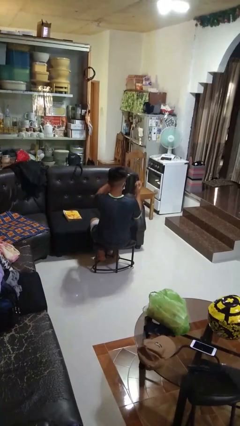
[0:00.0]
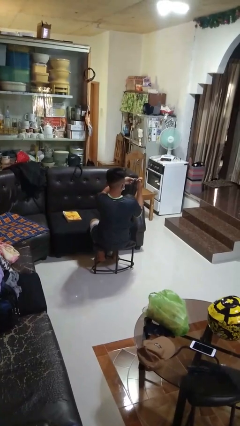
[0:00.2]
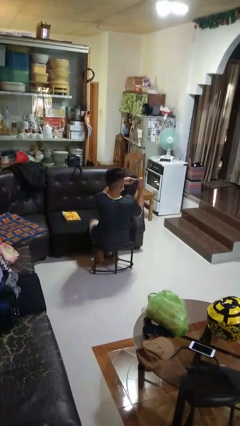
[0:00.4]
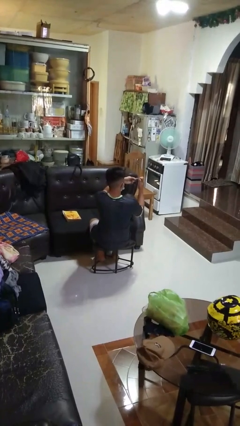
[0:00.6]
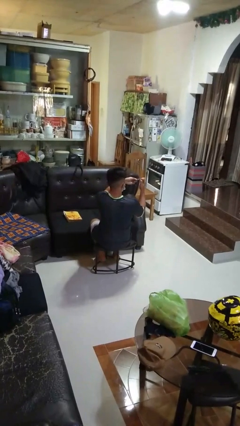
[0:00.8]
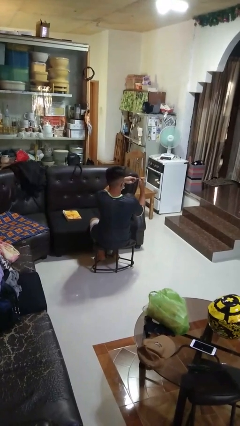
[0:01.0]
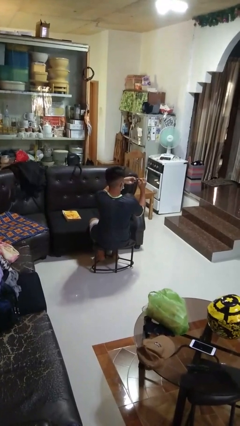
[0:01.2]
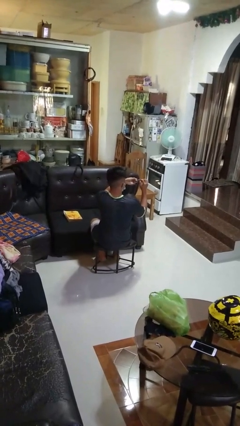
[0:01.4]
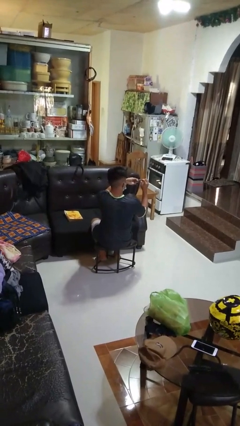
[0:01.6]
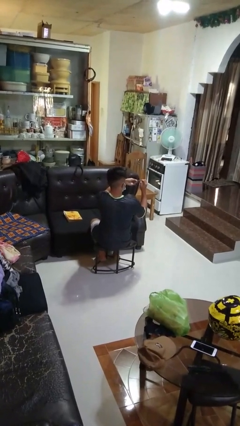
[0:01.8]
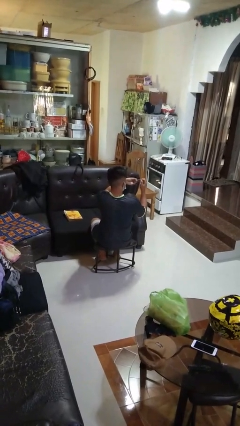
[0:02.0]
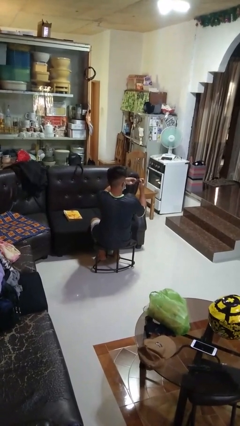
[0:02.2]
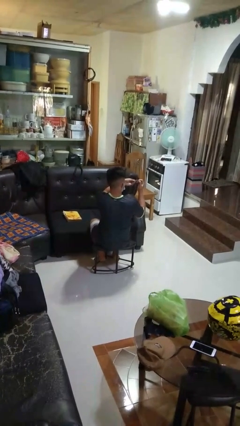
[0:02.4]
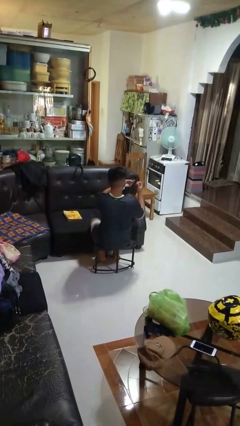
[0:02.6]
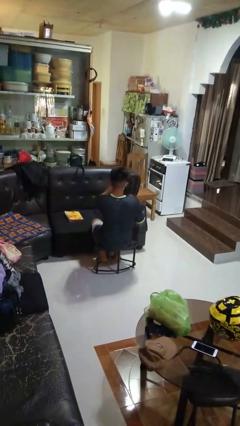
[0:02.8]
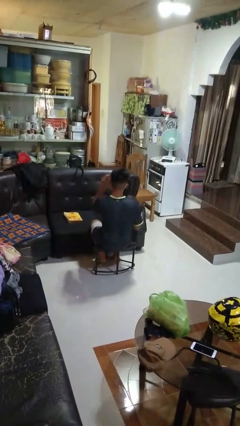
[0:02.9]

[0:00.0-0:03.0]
person clips fingernails

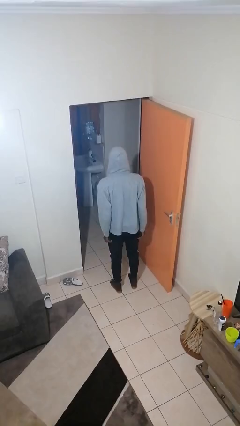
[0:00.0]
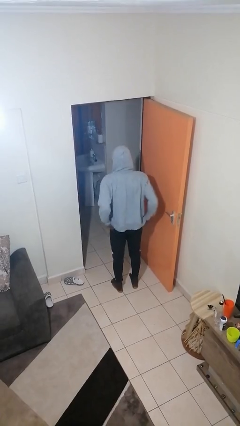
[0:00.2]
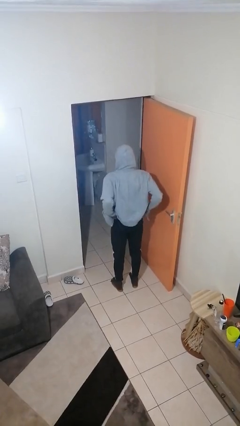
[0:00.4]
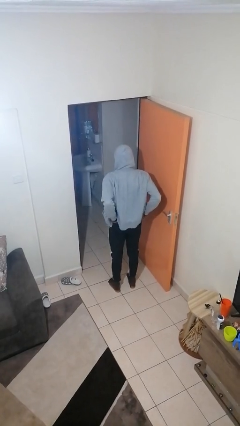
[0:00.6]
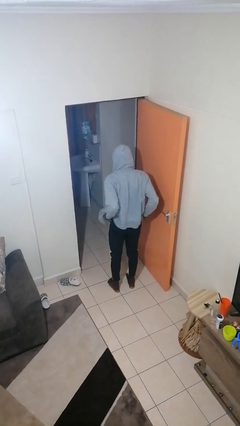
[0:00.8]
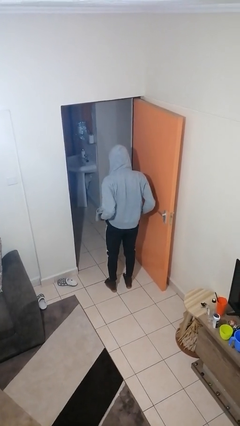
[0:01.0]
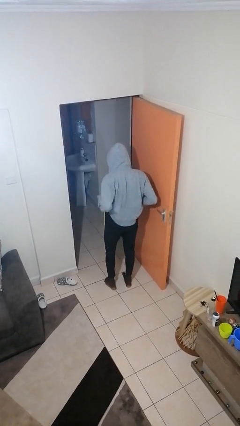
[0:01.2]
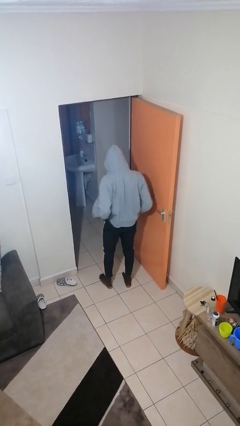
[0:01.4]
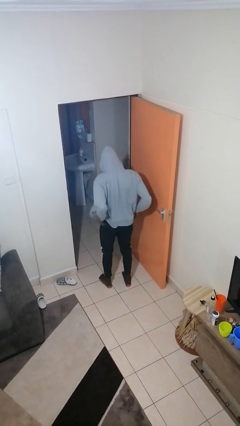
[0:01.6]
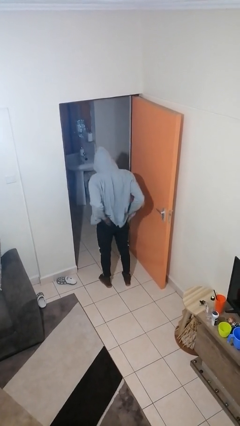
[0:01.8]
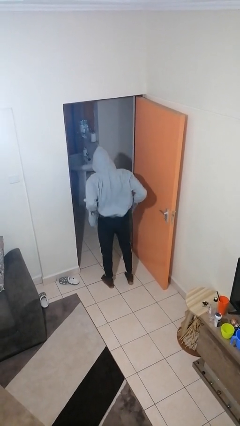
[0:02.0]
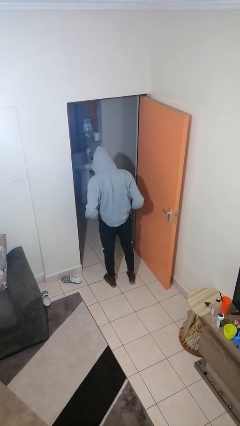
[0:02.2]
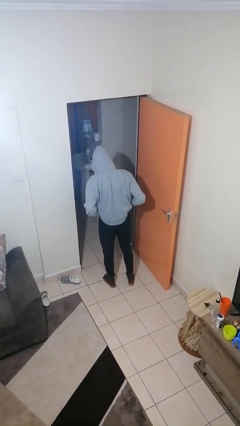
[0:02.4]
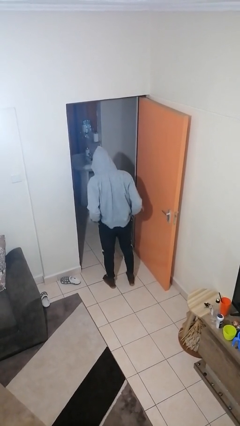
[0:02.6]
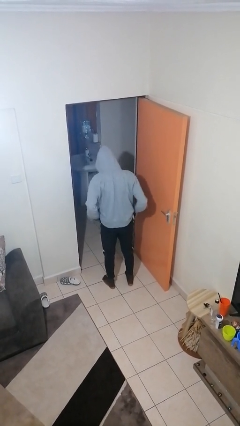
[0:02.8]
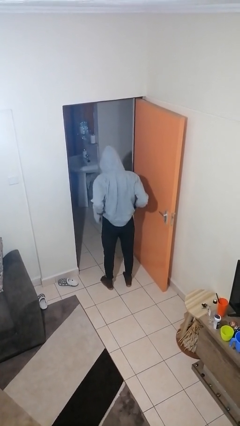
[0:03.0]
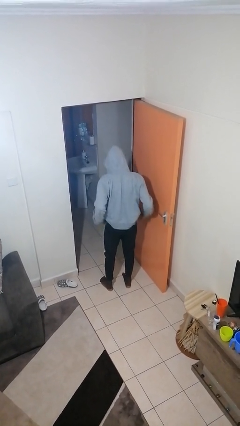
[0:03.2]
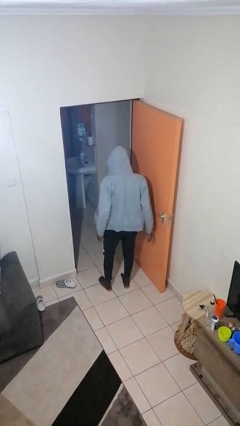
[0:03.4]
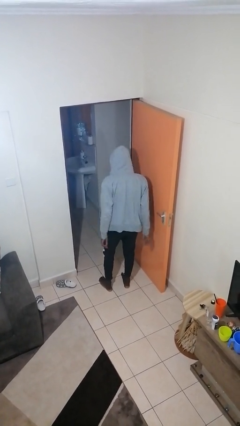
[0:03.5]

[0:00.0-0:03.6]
person hikes up pants

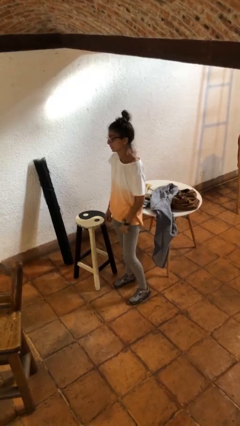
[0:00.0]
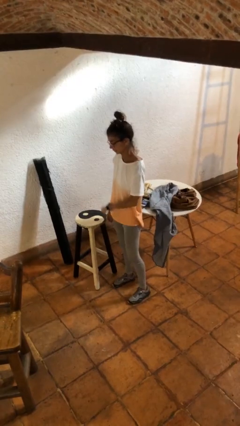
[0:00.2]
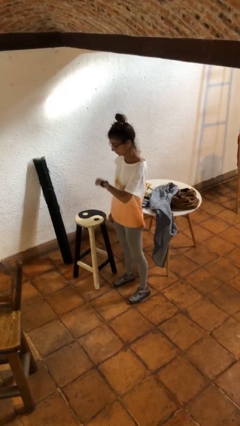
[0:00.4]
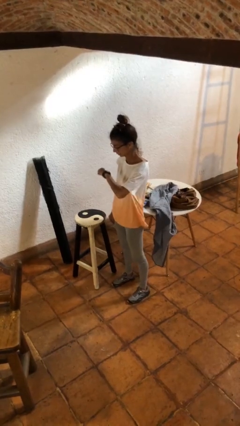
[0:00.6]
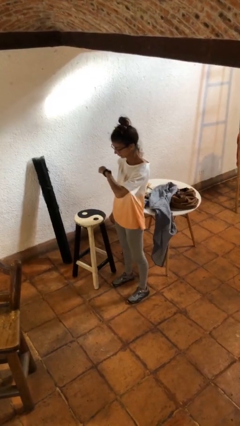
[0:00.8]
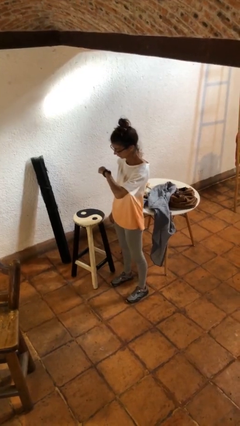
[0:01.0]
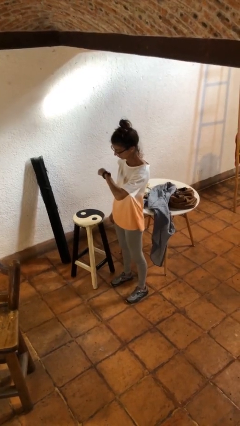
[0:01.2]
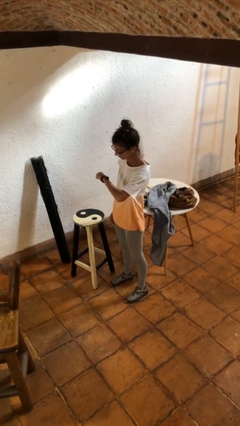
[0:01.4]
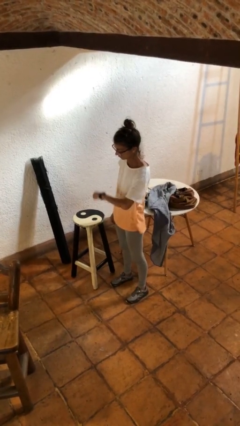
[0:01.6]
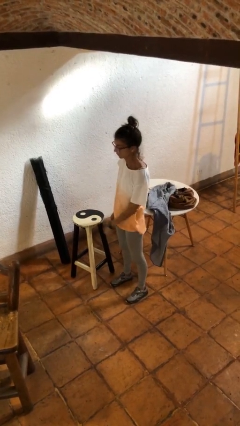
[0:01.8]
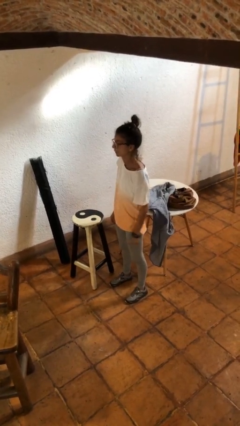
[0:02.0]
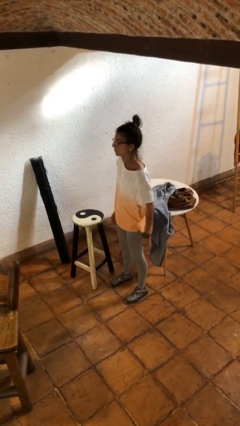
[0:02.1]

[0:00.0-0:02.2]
person looks at wristwatch

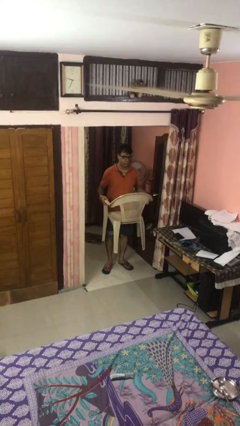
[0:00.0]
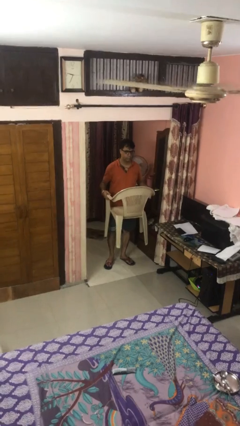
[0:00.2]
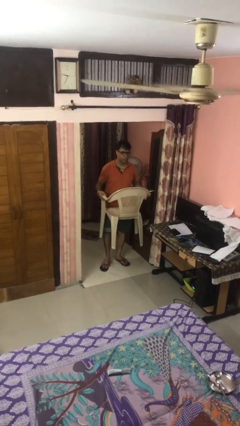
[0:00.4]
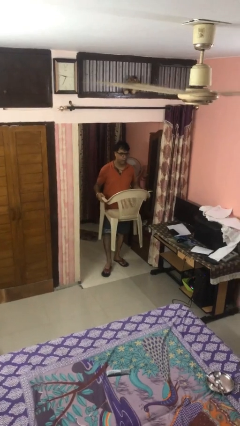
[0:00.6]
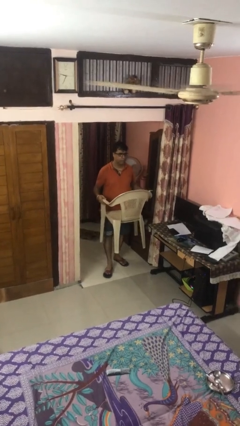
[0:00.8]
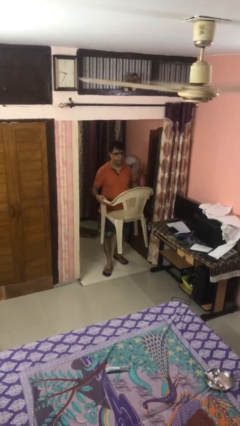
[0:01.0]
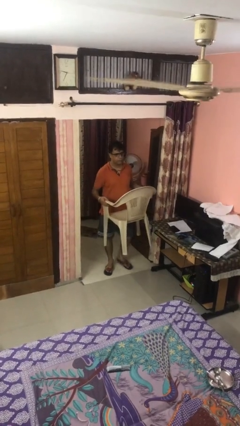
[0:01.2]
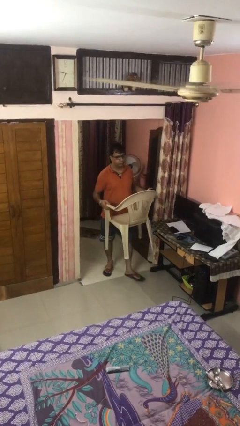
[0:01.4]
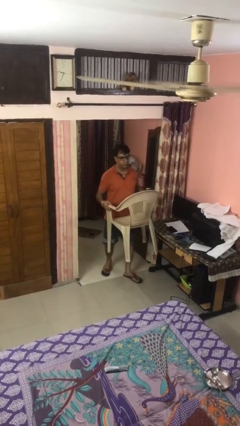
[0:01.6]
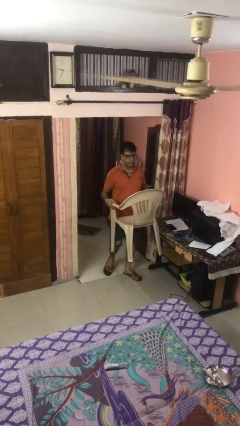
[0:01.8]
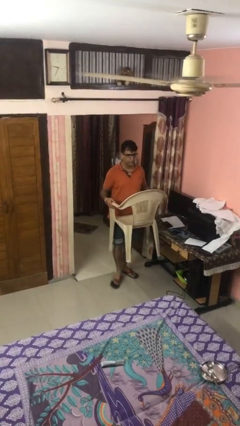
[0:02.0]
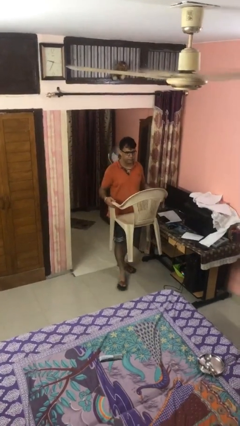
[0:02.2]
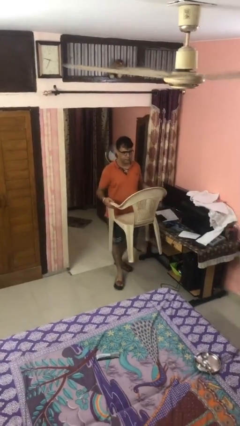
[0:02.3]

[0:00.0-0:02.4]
person carries furniture

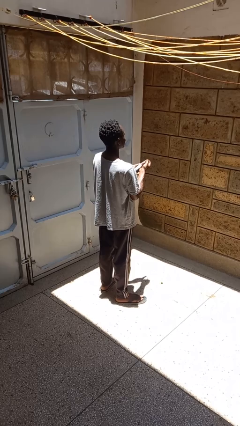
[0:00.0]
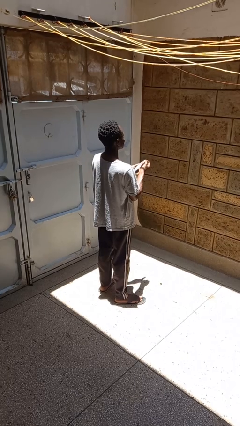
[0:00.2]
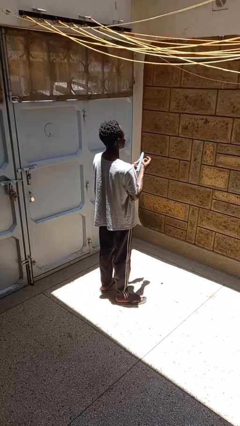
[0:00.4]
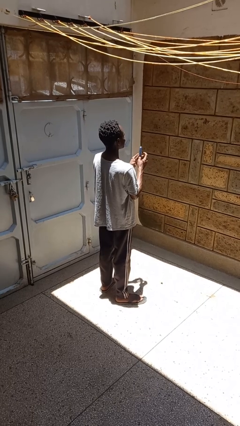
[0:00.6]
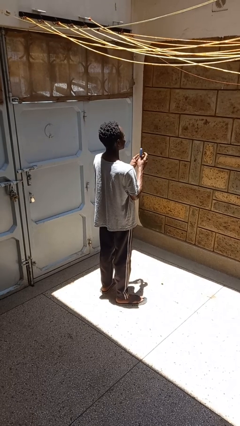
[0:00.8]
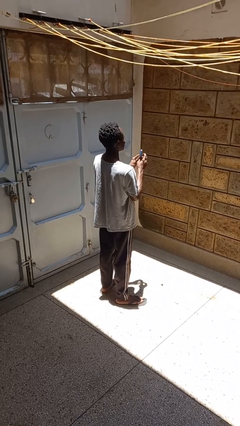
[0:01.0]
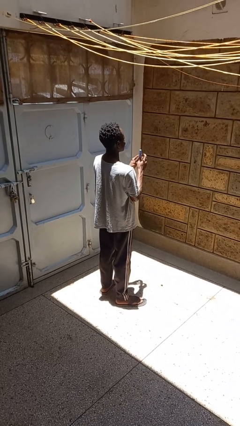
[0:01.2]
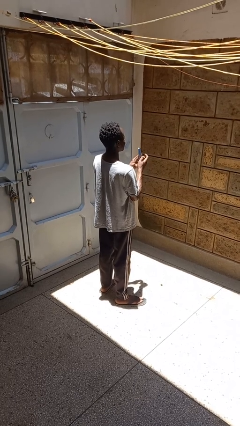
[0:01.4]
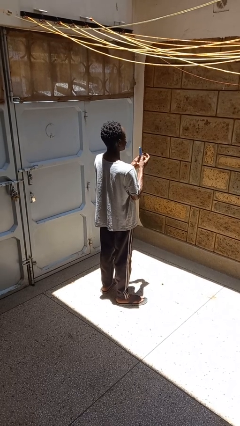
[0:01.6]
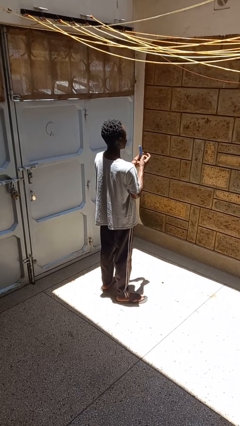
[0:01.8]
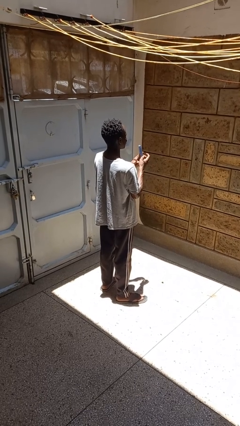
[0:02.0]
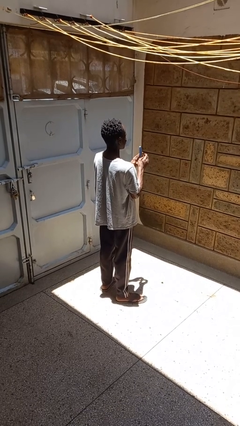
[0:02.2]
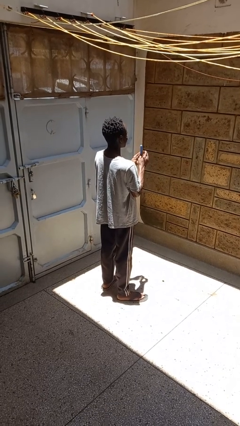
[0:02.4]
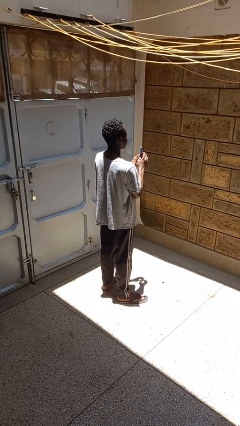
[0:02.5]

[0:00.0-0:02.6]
person files fingernails

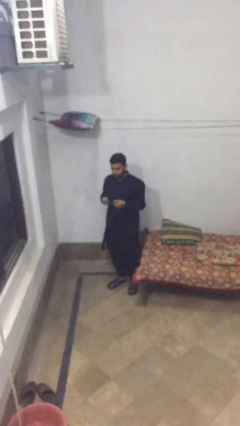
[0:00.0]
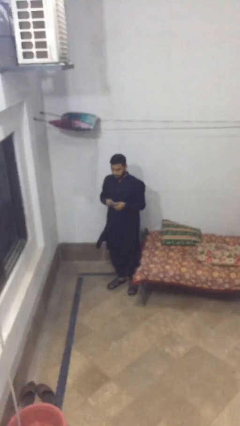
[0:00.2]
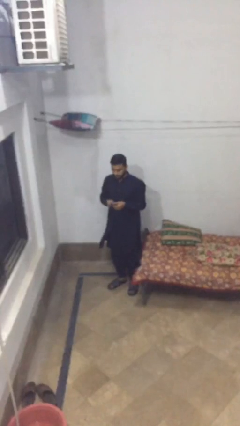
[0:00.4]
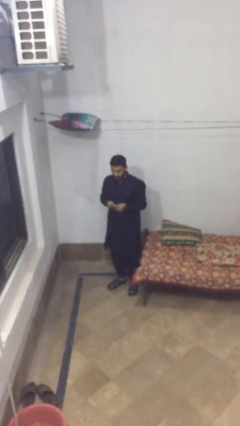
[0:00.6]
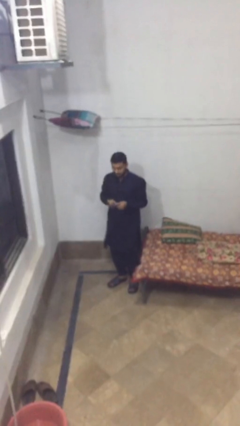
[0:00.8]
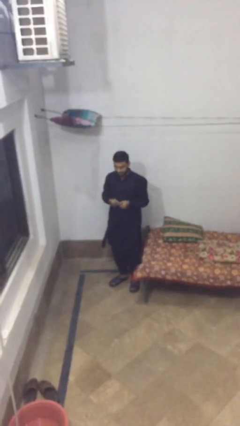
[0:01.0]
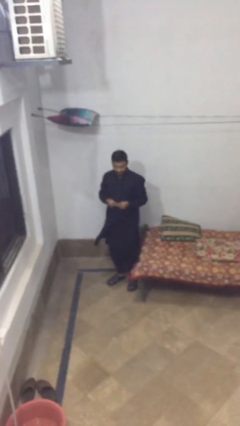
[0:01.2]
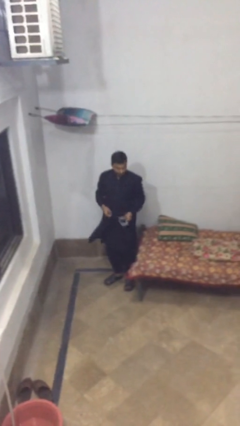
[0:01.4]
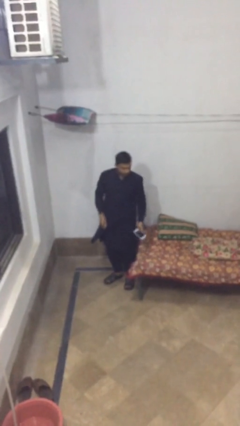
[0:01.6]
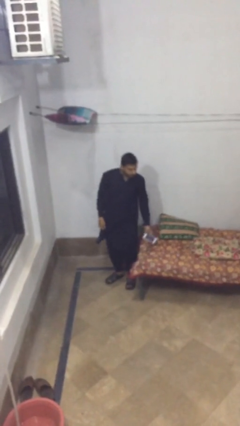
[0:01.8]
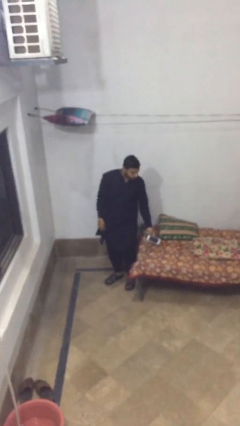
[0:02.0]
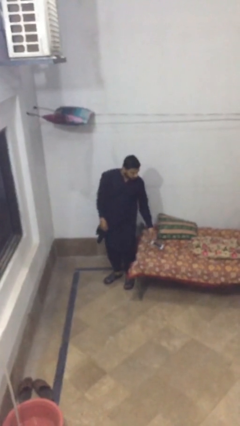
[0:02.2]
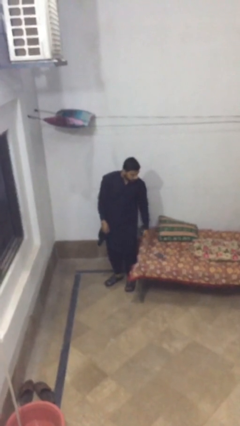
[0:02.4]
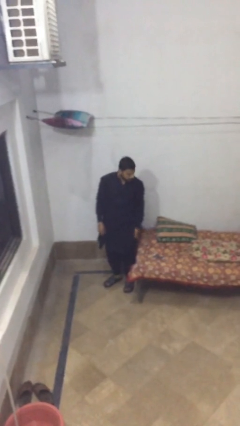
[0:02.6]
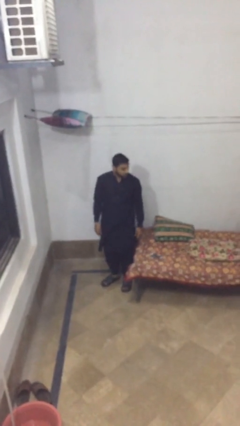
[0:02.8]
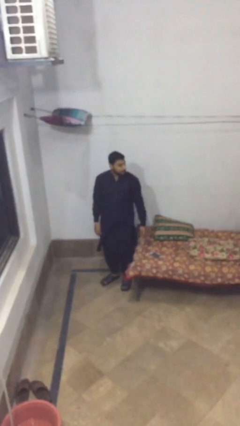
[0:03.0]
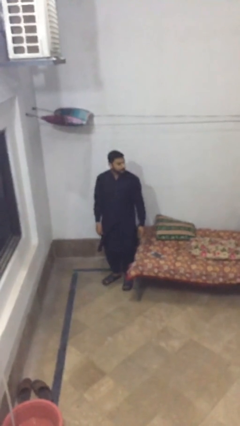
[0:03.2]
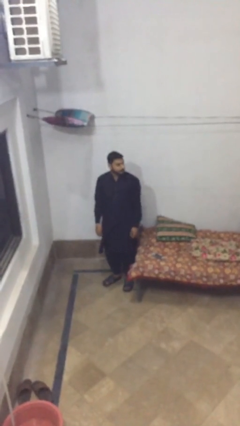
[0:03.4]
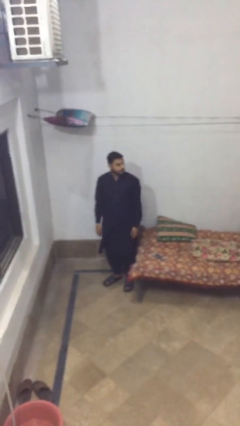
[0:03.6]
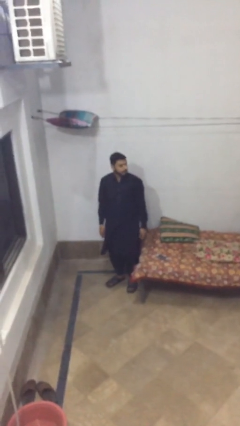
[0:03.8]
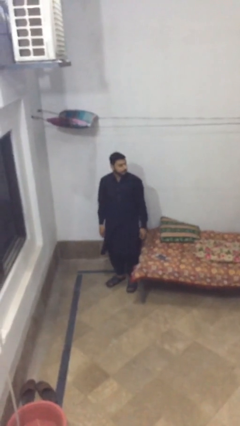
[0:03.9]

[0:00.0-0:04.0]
person puts down object on table
